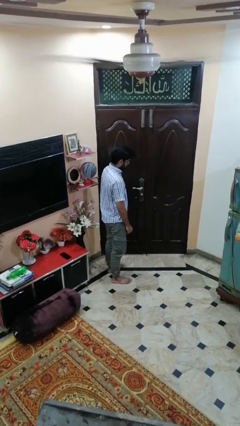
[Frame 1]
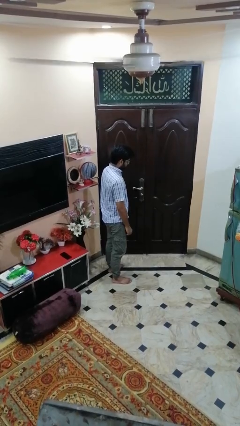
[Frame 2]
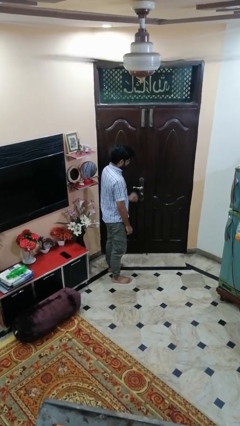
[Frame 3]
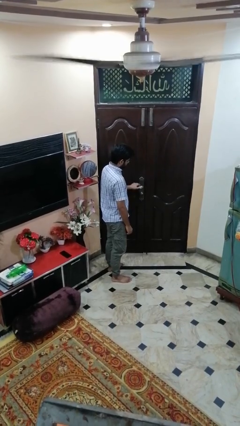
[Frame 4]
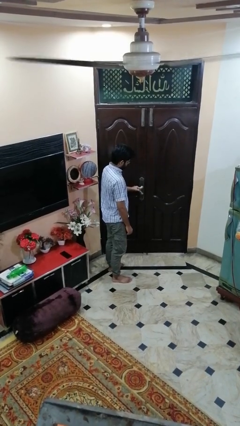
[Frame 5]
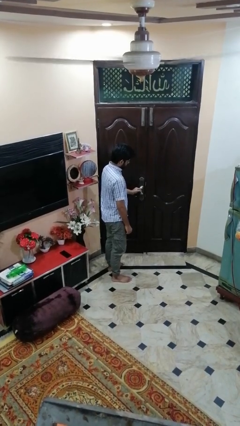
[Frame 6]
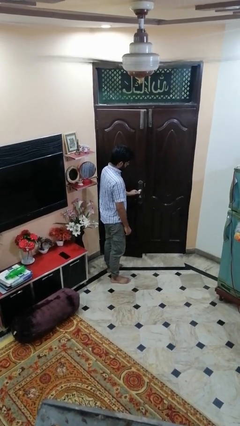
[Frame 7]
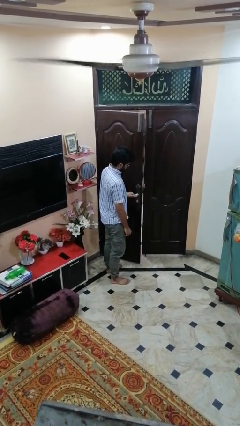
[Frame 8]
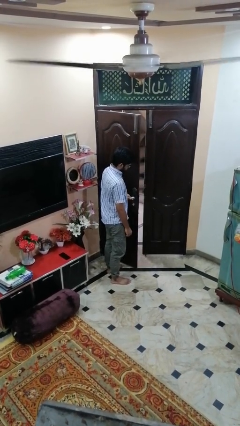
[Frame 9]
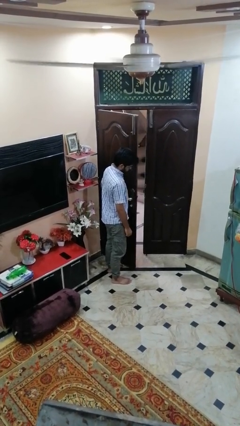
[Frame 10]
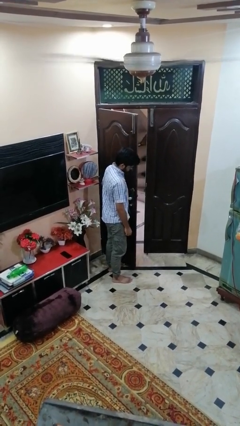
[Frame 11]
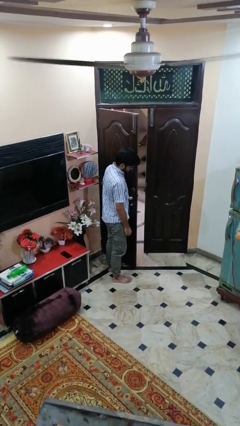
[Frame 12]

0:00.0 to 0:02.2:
person opens facility door

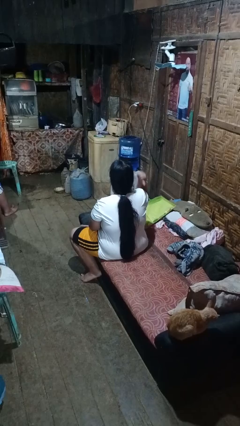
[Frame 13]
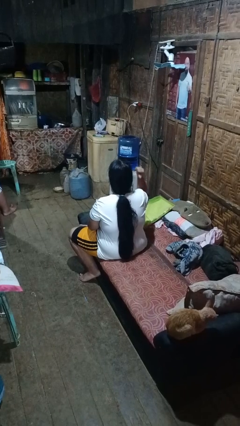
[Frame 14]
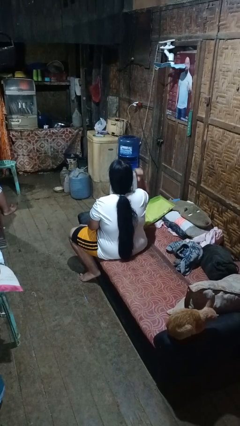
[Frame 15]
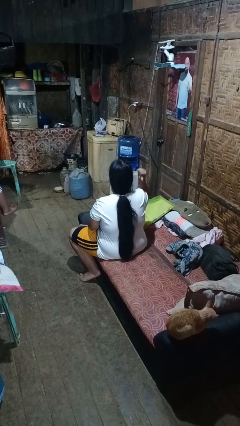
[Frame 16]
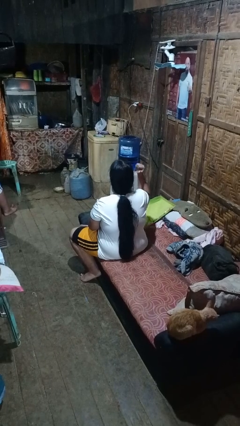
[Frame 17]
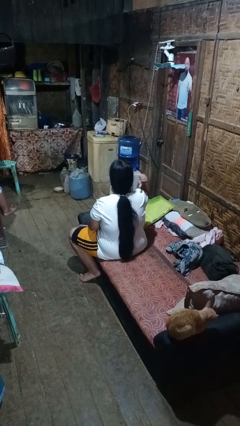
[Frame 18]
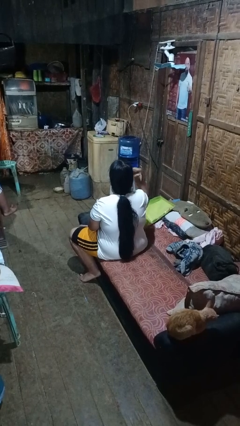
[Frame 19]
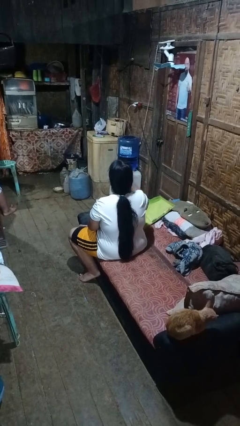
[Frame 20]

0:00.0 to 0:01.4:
person gestures behind me

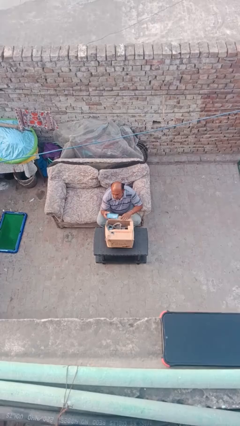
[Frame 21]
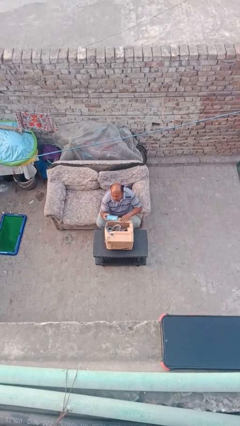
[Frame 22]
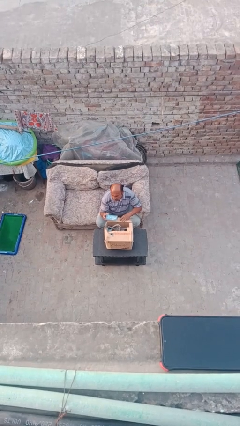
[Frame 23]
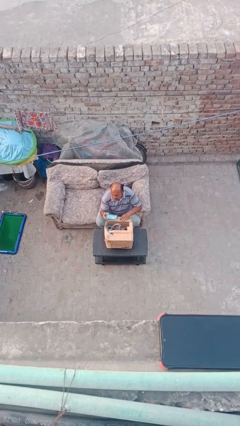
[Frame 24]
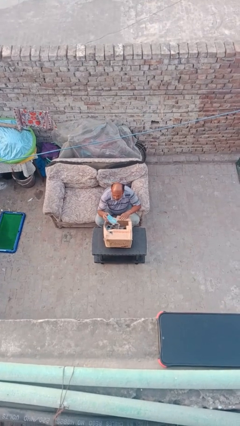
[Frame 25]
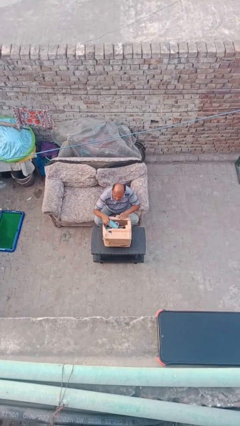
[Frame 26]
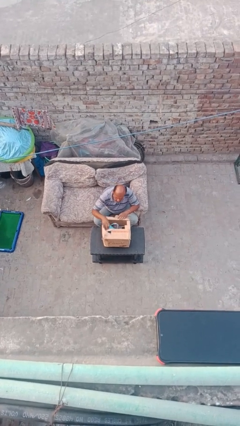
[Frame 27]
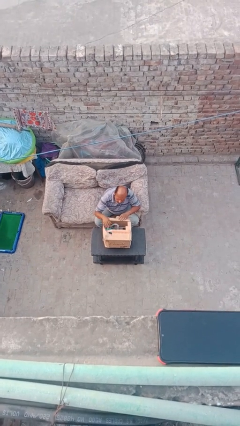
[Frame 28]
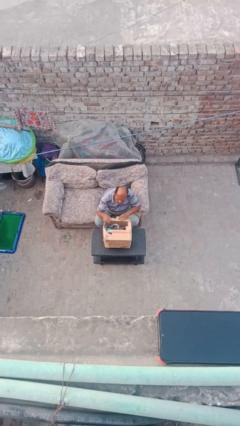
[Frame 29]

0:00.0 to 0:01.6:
person puts object into box

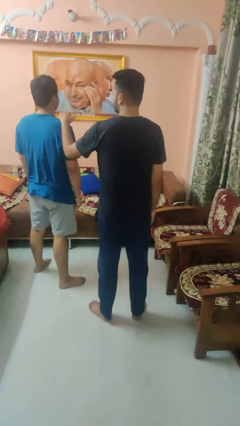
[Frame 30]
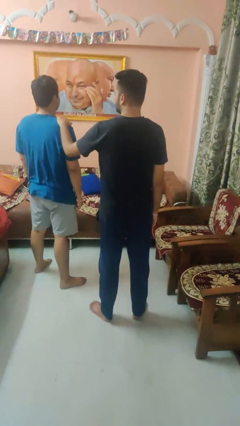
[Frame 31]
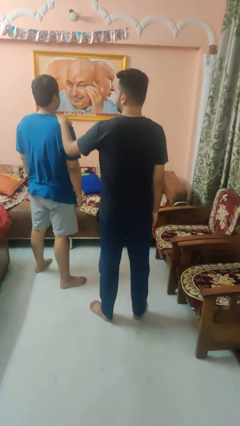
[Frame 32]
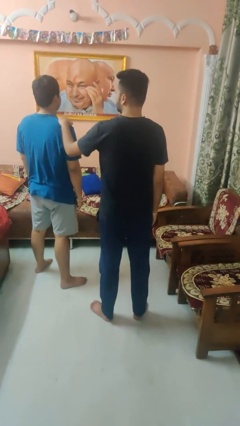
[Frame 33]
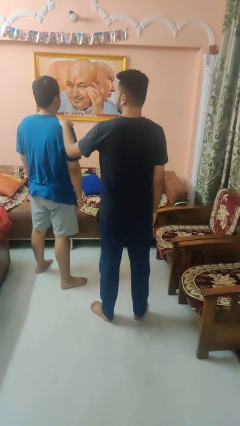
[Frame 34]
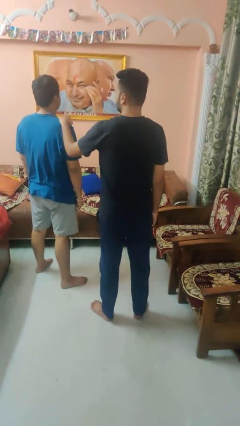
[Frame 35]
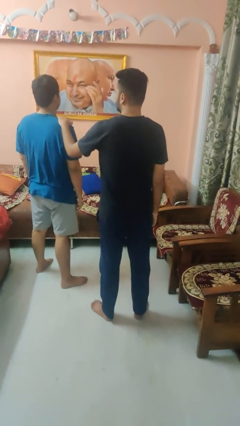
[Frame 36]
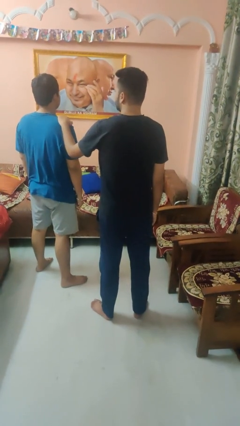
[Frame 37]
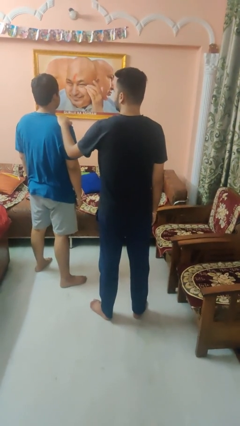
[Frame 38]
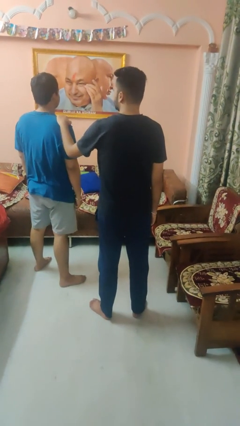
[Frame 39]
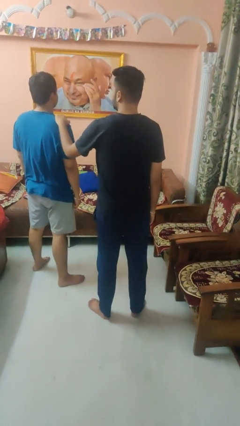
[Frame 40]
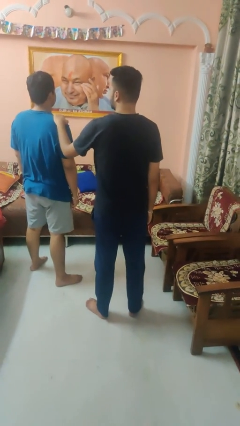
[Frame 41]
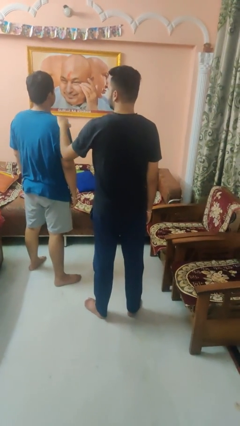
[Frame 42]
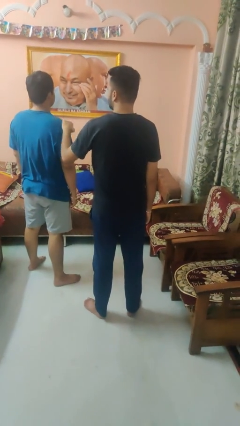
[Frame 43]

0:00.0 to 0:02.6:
person pounds shoulders of person

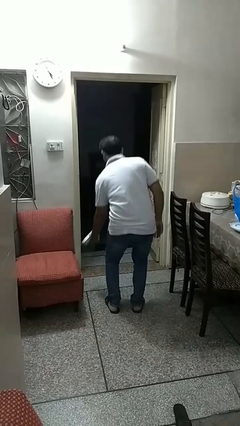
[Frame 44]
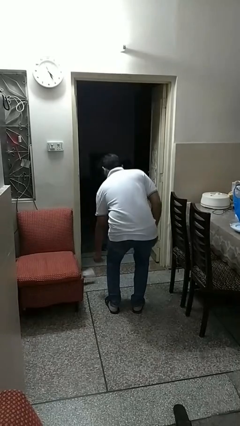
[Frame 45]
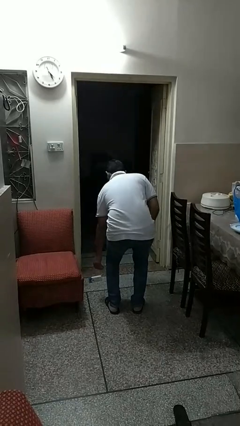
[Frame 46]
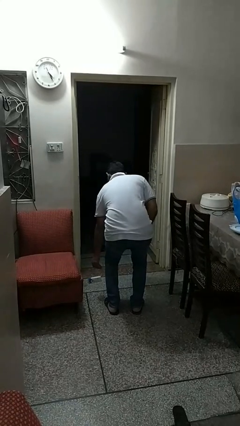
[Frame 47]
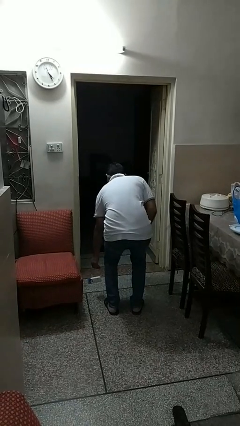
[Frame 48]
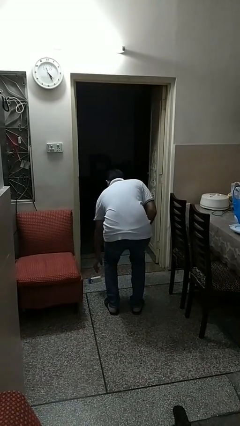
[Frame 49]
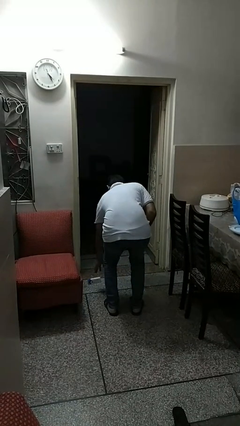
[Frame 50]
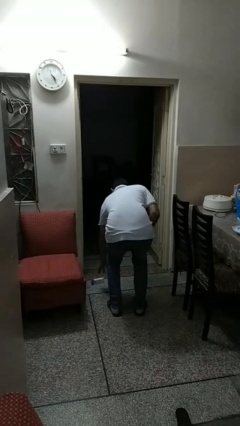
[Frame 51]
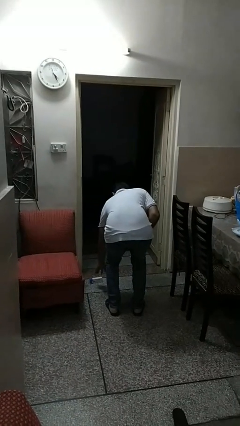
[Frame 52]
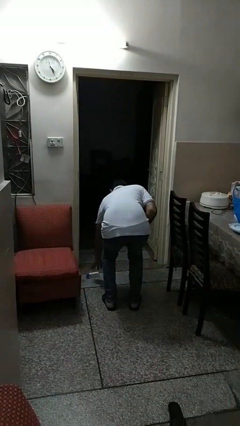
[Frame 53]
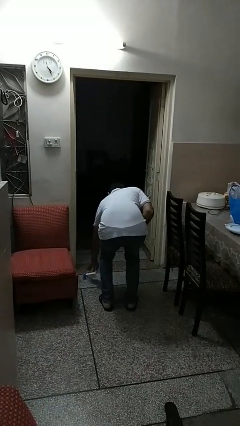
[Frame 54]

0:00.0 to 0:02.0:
person catches dropped object

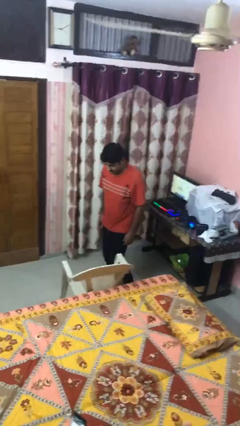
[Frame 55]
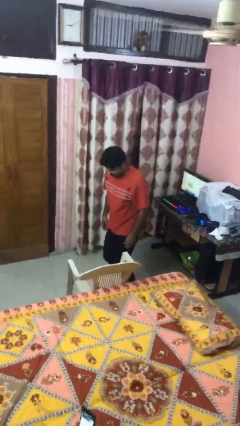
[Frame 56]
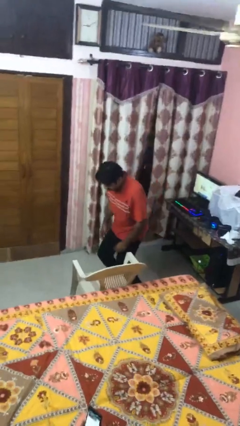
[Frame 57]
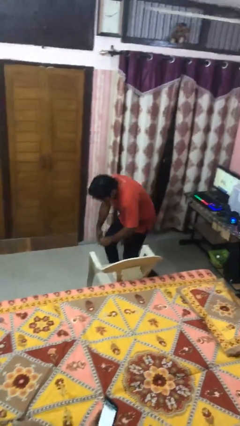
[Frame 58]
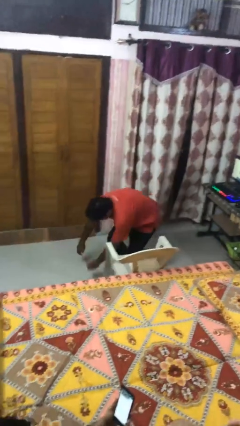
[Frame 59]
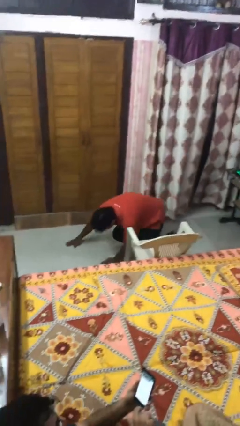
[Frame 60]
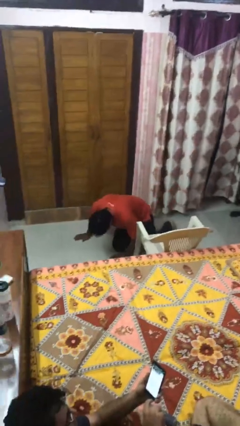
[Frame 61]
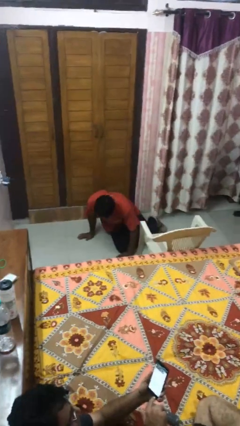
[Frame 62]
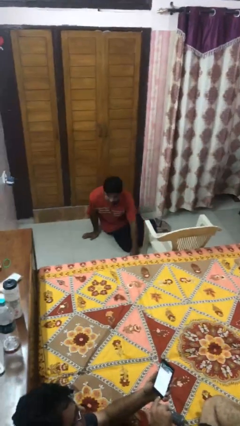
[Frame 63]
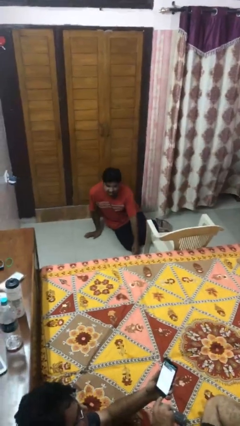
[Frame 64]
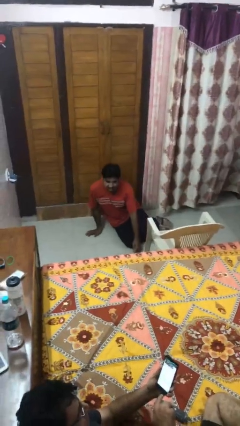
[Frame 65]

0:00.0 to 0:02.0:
person trips on object on floor

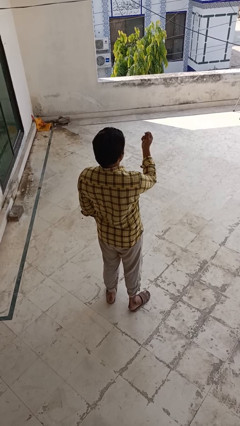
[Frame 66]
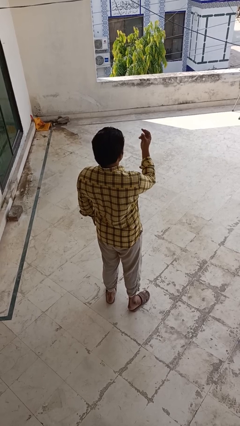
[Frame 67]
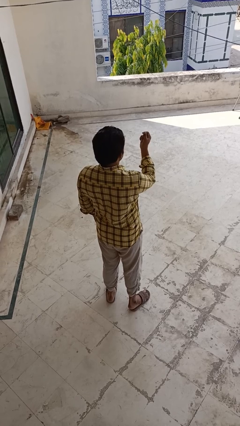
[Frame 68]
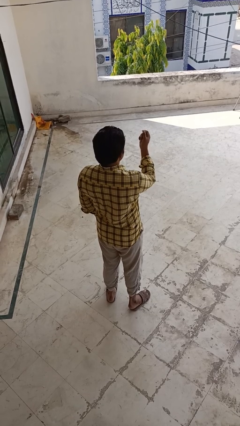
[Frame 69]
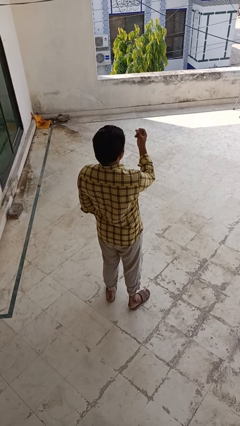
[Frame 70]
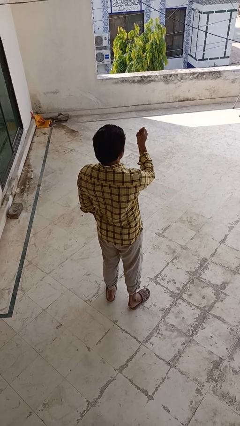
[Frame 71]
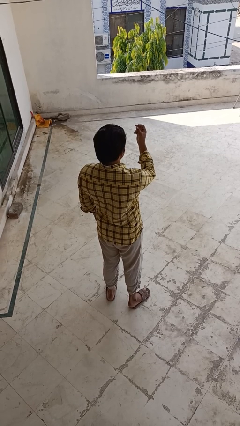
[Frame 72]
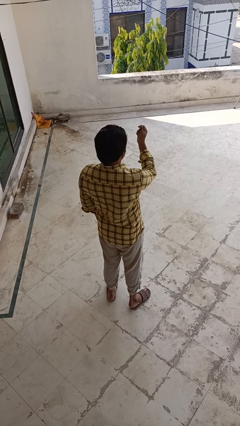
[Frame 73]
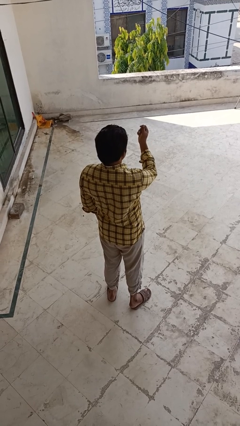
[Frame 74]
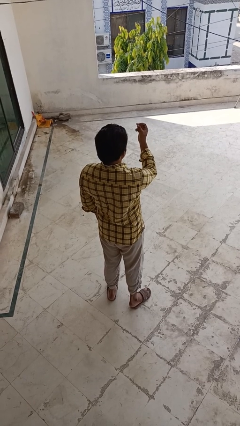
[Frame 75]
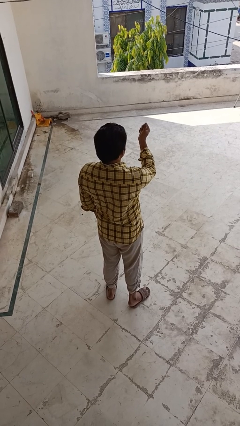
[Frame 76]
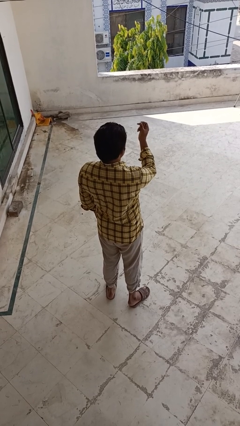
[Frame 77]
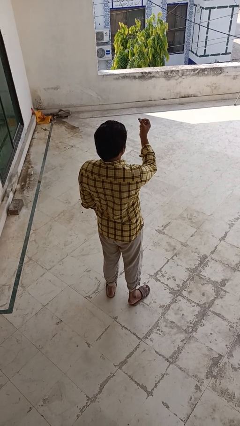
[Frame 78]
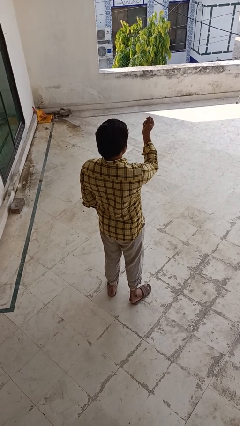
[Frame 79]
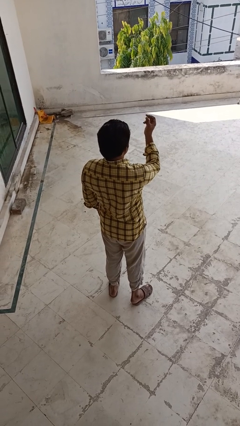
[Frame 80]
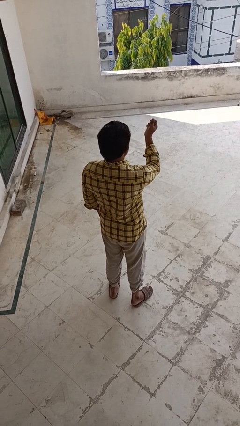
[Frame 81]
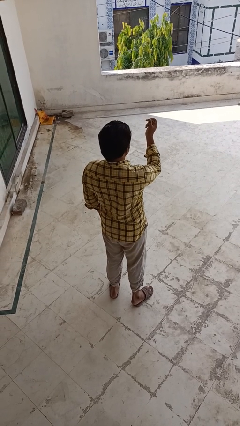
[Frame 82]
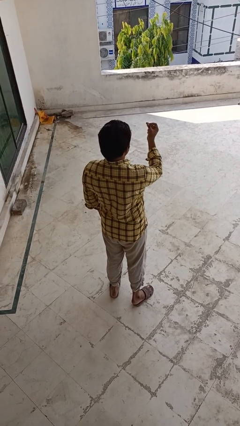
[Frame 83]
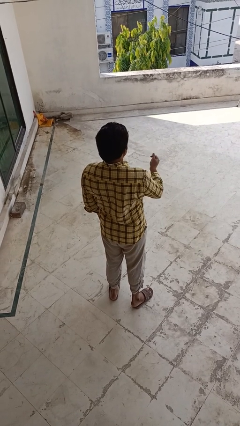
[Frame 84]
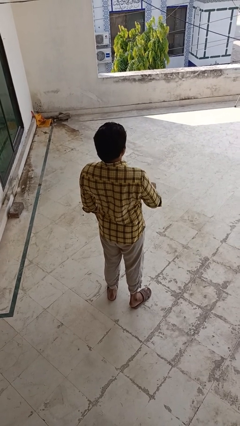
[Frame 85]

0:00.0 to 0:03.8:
person snaps fingers

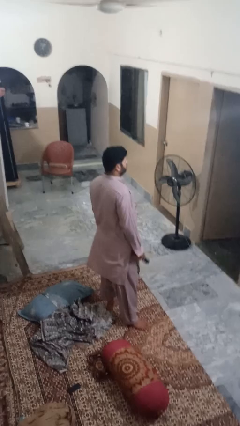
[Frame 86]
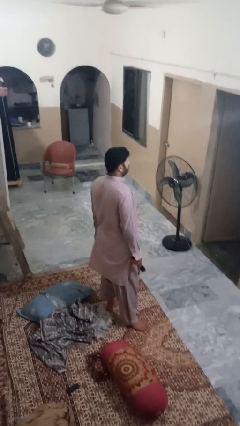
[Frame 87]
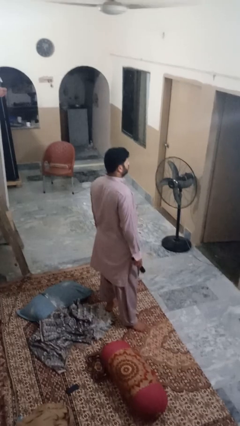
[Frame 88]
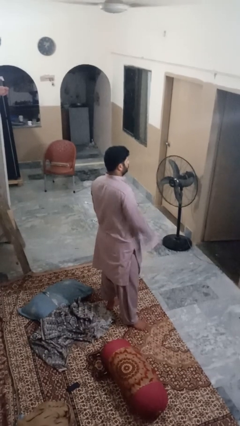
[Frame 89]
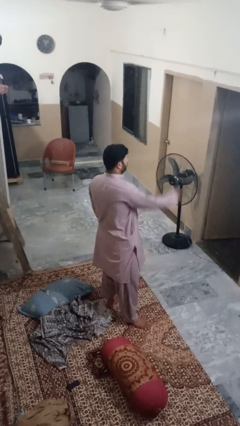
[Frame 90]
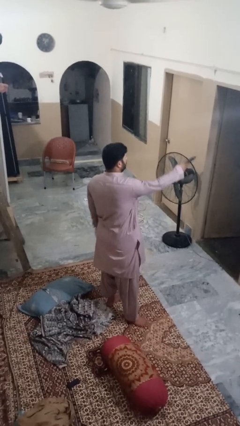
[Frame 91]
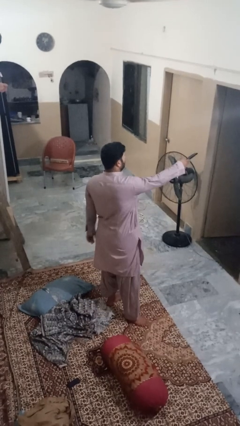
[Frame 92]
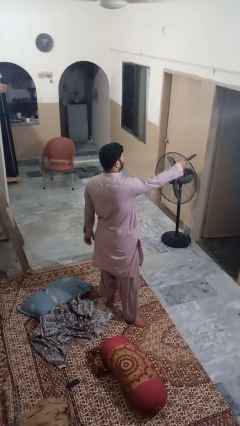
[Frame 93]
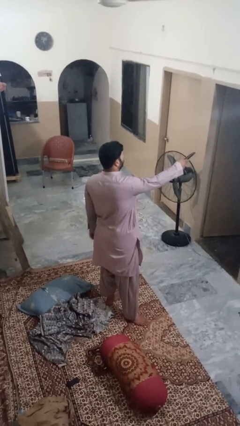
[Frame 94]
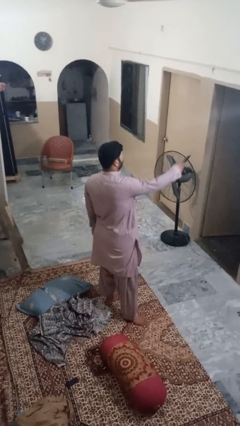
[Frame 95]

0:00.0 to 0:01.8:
person uses television remote
